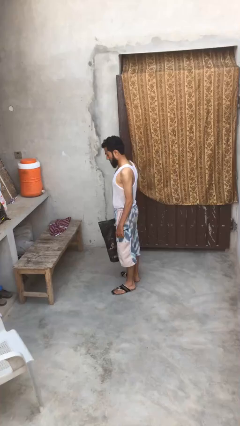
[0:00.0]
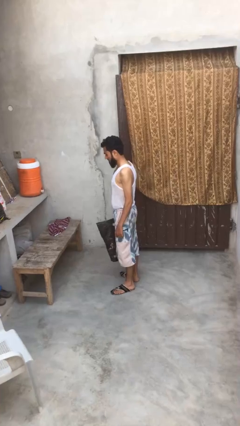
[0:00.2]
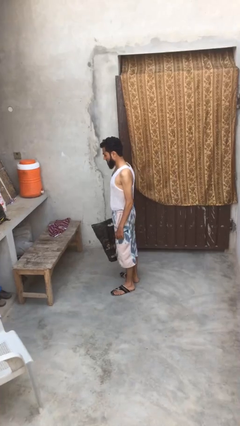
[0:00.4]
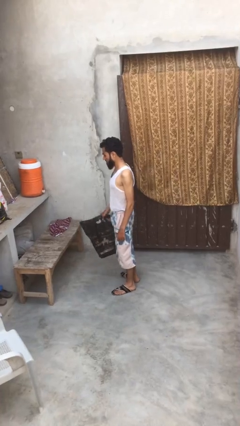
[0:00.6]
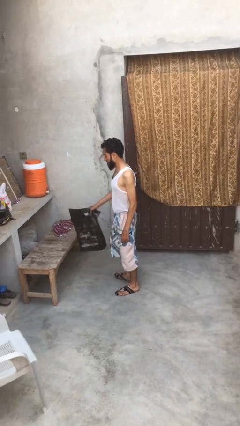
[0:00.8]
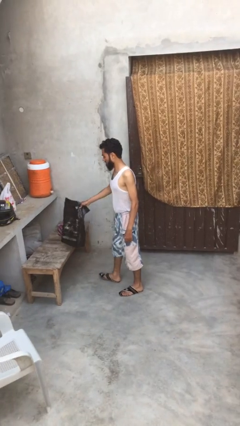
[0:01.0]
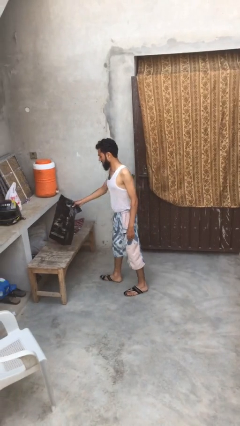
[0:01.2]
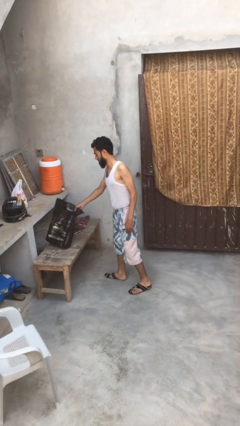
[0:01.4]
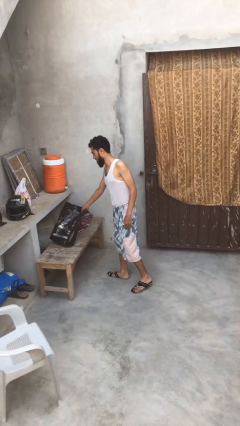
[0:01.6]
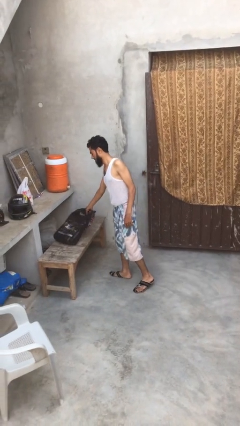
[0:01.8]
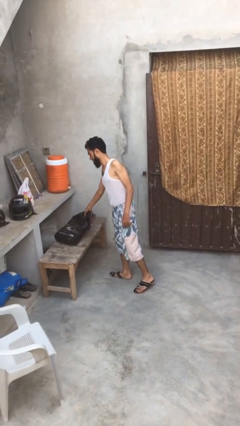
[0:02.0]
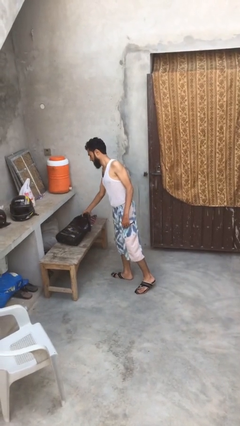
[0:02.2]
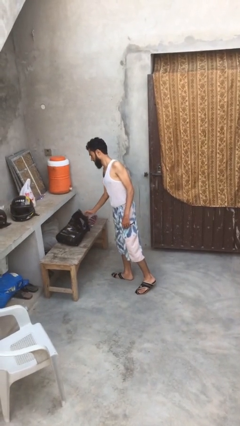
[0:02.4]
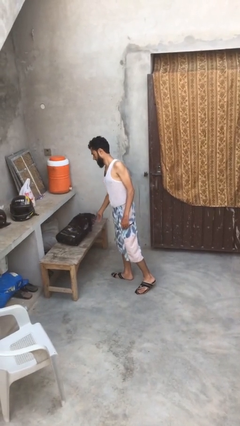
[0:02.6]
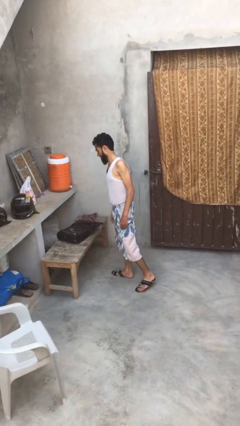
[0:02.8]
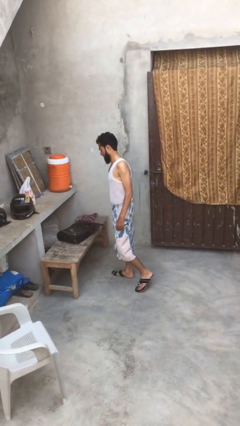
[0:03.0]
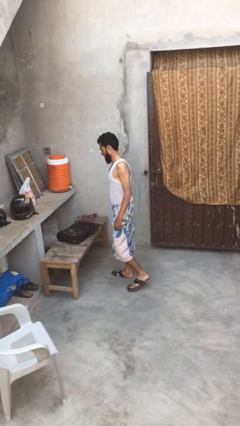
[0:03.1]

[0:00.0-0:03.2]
person puts down object on table

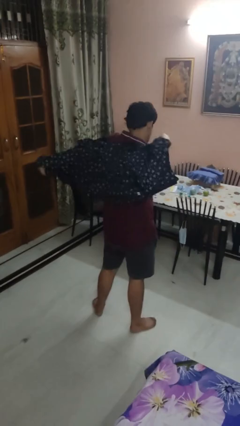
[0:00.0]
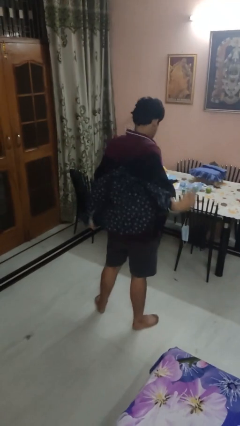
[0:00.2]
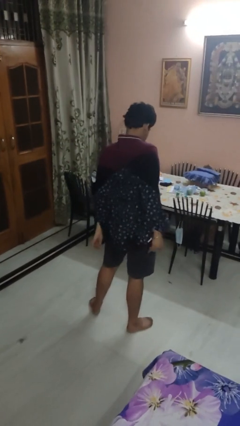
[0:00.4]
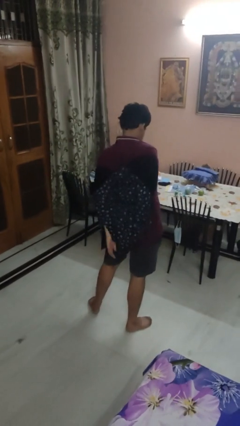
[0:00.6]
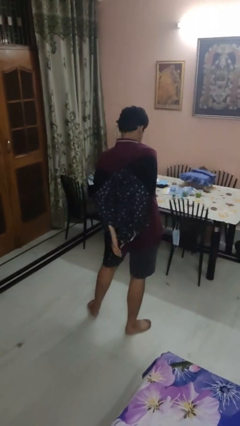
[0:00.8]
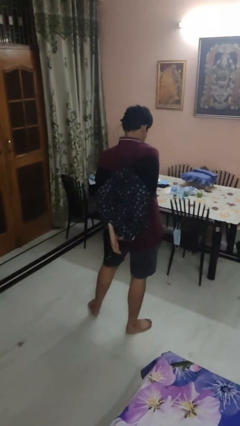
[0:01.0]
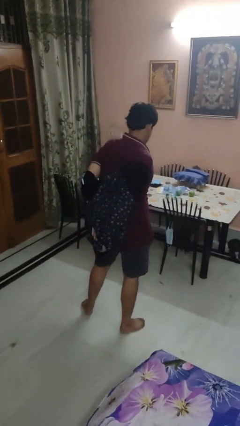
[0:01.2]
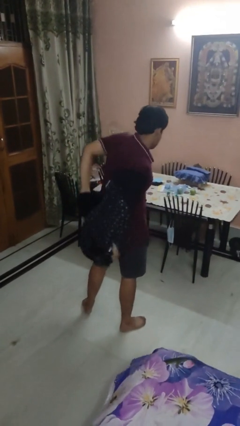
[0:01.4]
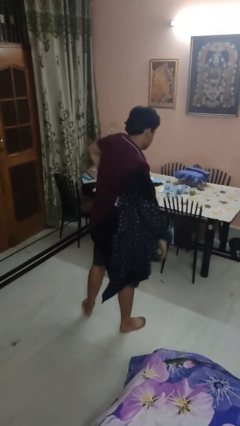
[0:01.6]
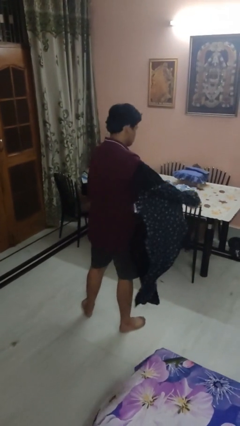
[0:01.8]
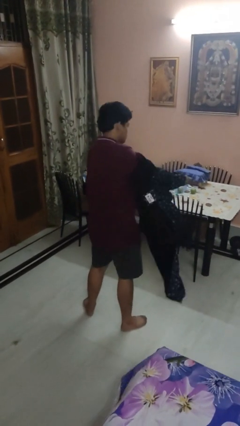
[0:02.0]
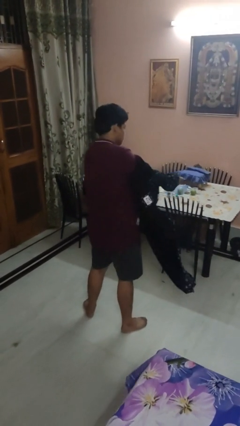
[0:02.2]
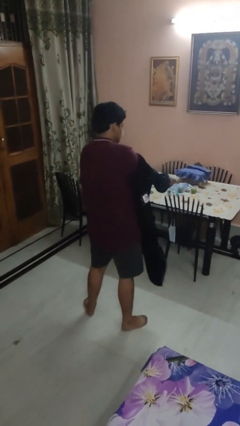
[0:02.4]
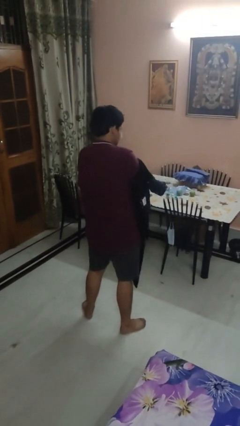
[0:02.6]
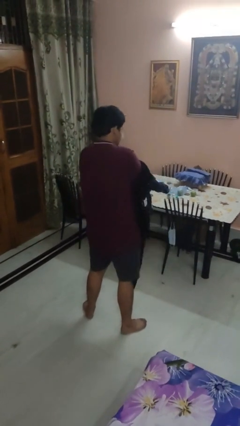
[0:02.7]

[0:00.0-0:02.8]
person takes off shirt

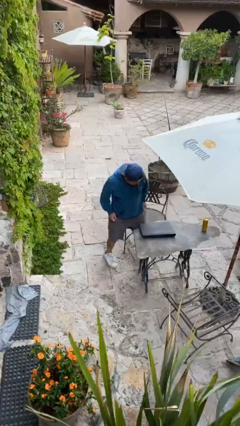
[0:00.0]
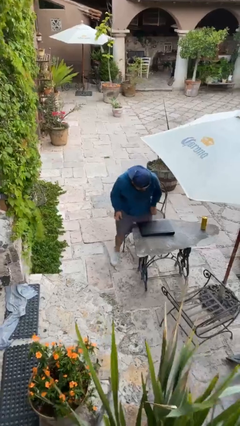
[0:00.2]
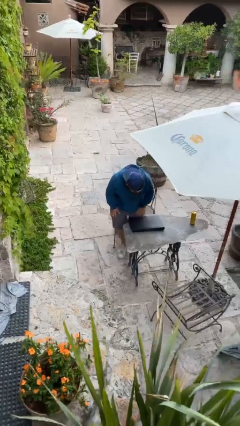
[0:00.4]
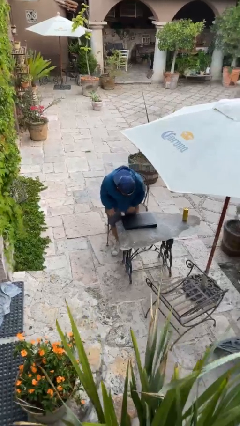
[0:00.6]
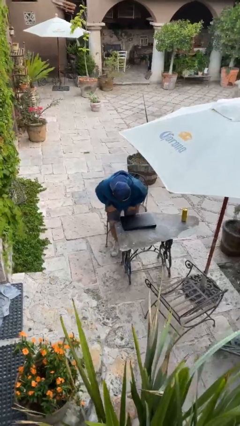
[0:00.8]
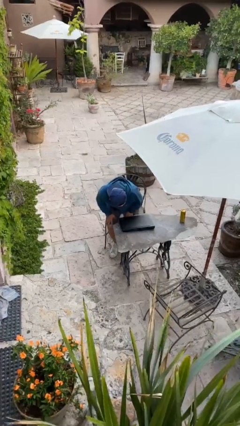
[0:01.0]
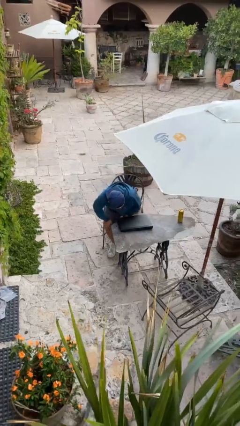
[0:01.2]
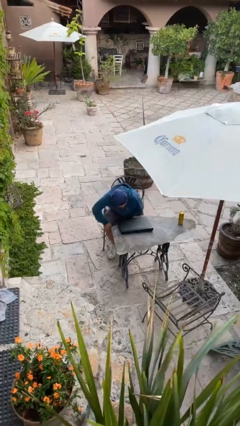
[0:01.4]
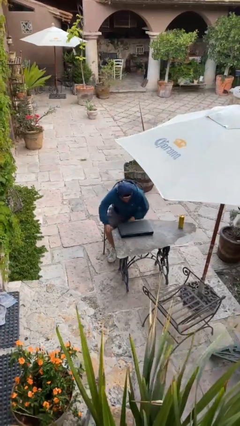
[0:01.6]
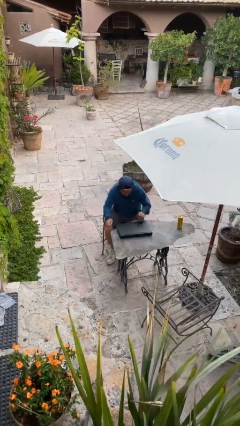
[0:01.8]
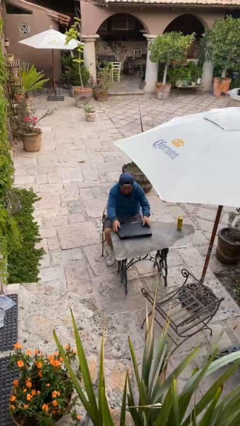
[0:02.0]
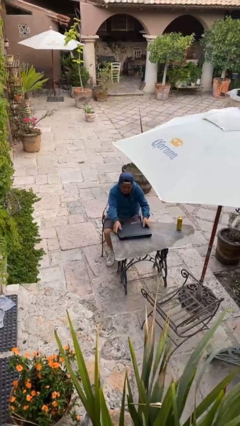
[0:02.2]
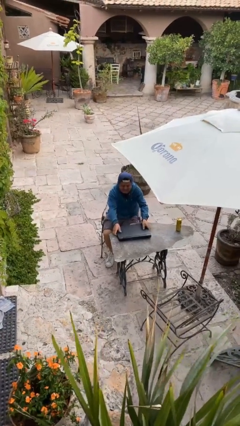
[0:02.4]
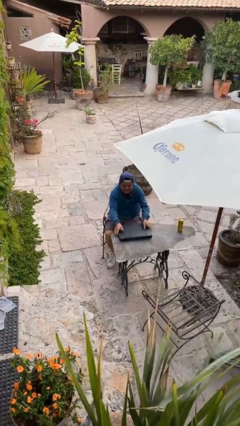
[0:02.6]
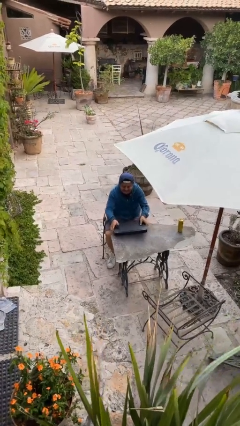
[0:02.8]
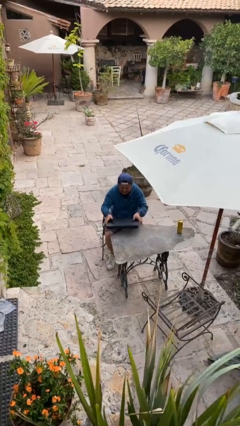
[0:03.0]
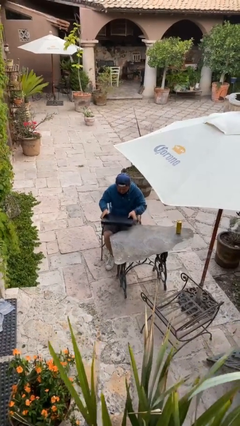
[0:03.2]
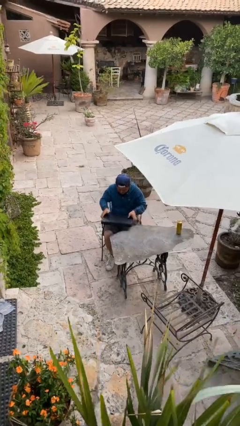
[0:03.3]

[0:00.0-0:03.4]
person sits down

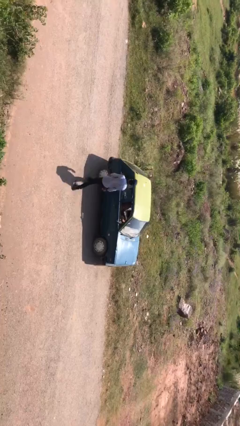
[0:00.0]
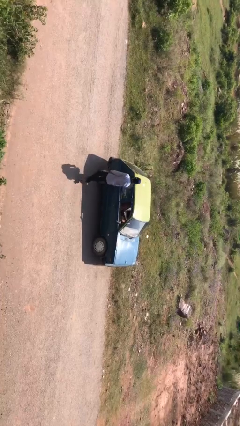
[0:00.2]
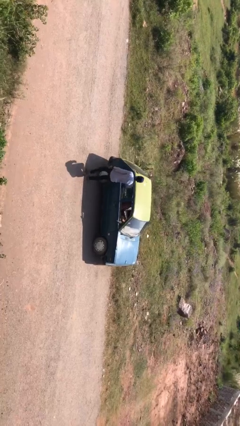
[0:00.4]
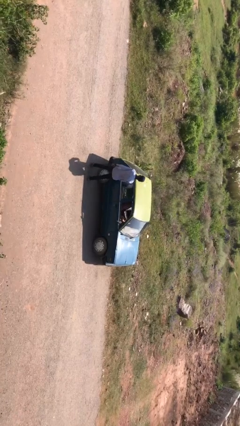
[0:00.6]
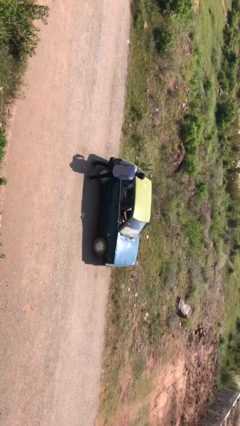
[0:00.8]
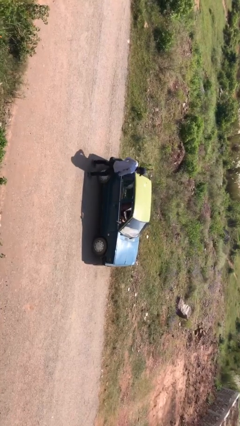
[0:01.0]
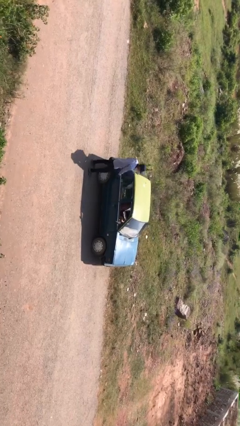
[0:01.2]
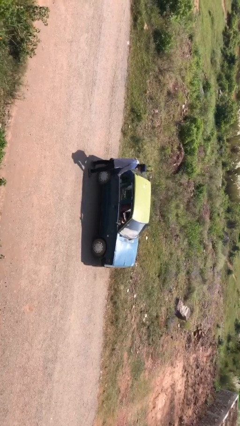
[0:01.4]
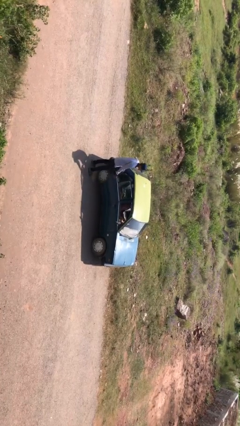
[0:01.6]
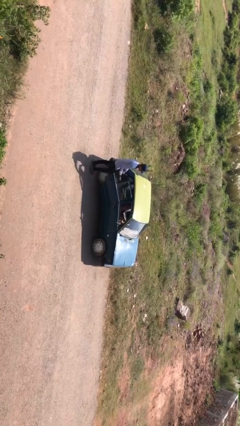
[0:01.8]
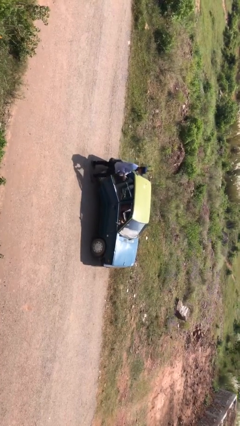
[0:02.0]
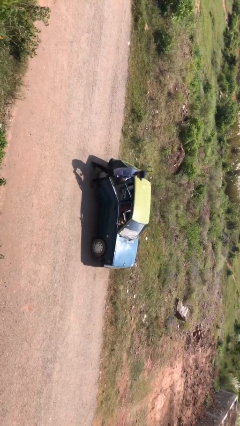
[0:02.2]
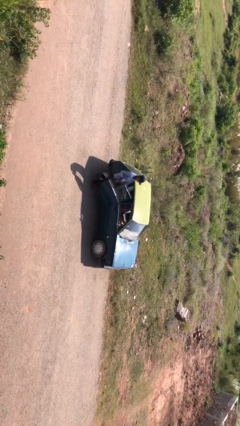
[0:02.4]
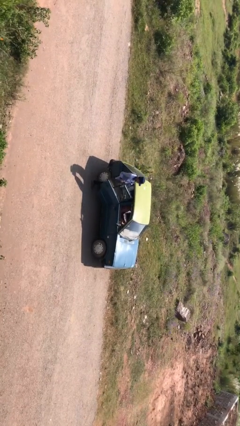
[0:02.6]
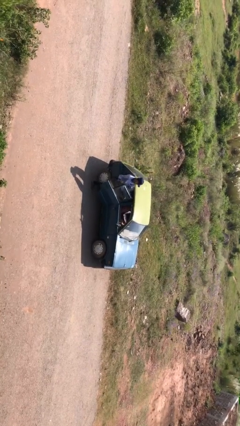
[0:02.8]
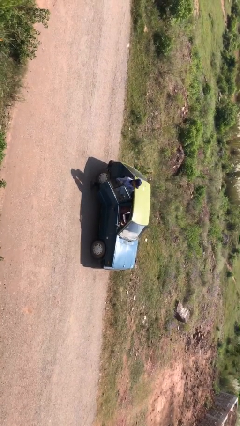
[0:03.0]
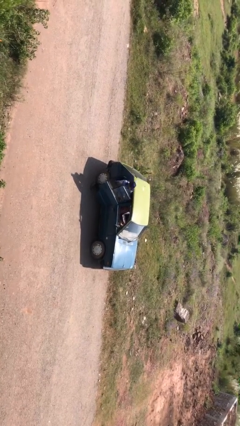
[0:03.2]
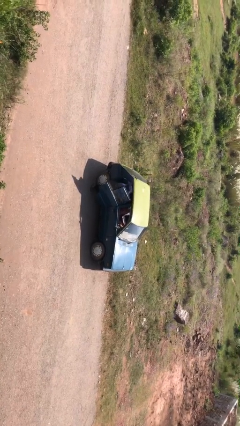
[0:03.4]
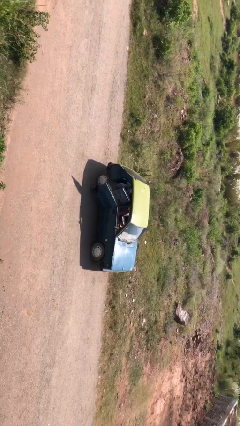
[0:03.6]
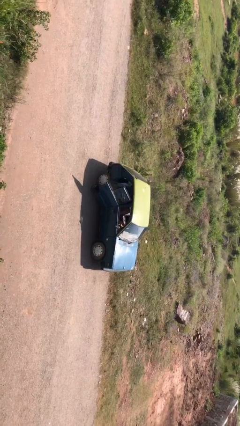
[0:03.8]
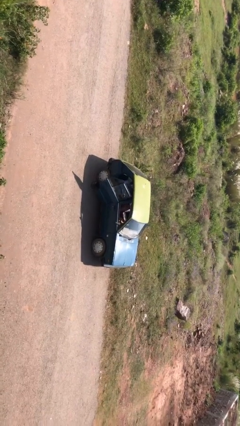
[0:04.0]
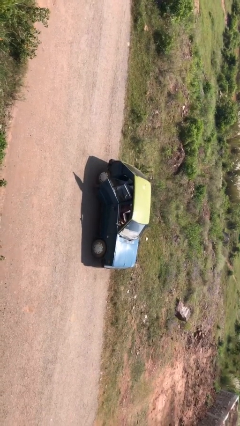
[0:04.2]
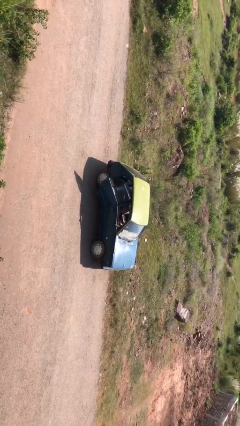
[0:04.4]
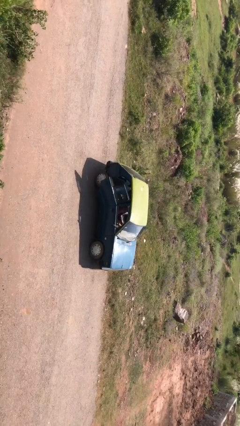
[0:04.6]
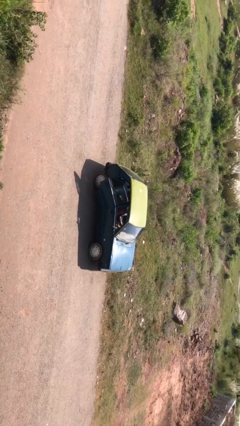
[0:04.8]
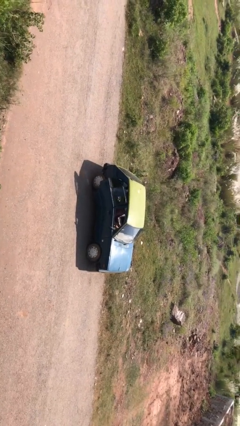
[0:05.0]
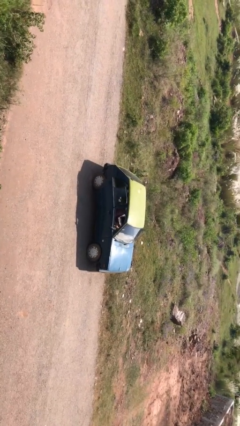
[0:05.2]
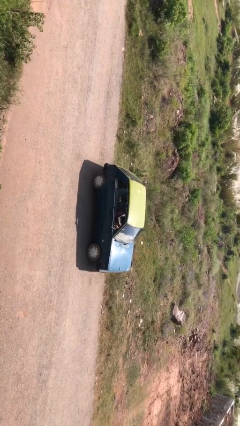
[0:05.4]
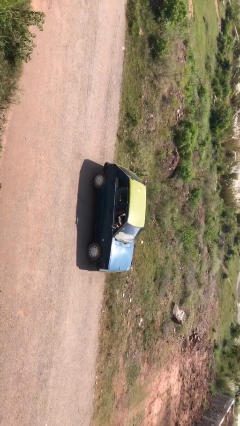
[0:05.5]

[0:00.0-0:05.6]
car picks up person

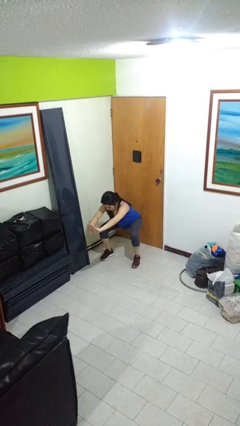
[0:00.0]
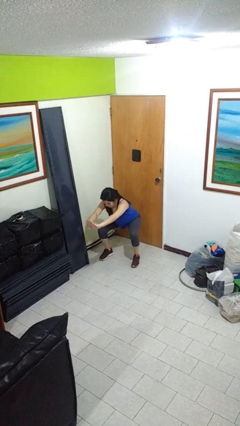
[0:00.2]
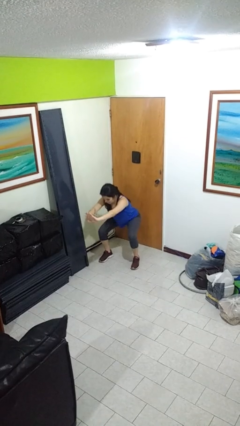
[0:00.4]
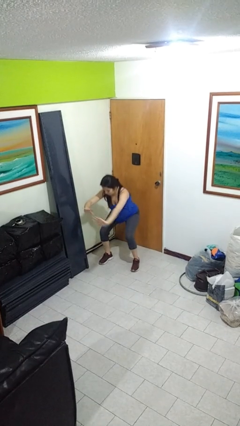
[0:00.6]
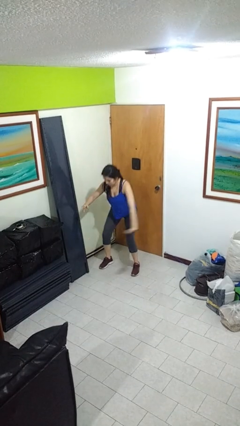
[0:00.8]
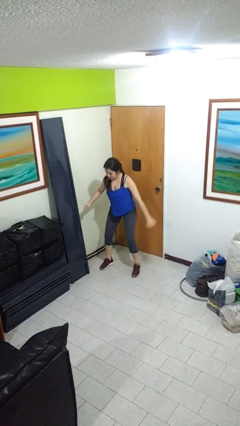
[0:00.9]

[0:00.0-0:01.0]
person stands up

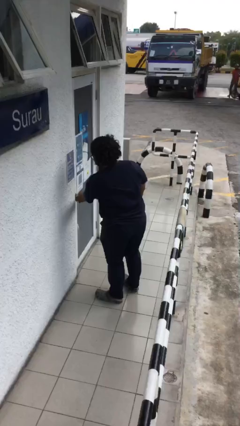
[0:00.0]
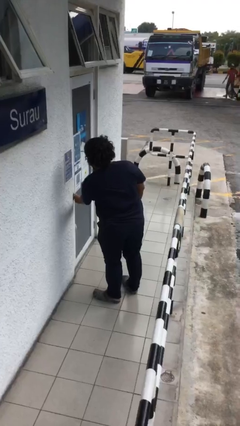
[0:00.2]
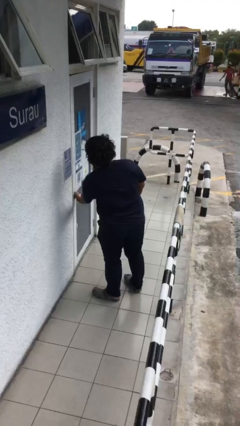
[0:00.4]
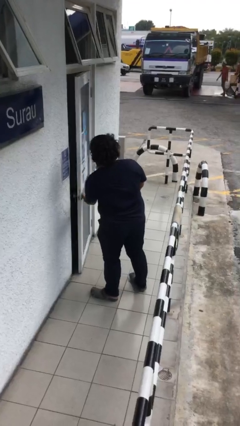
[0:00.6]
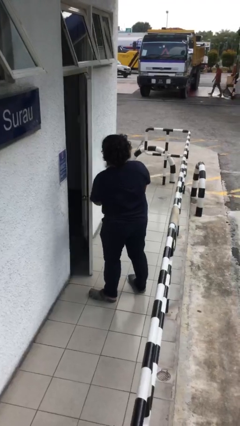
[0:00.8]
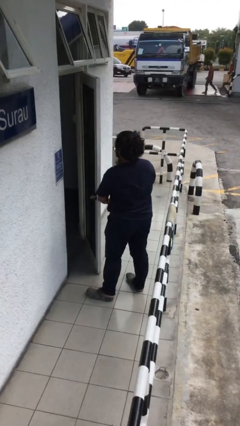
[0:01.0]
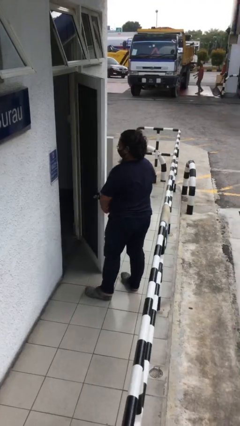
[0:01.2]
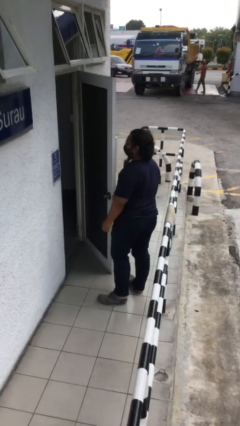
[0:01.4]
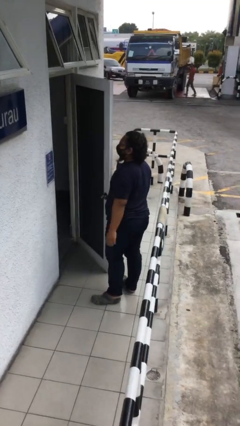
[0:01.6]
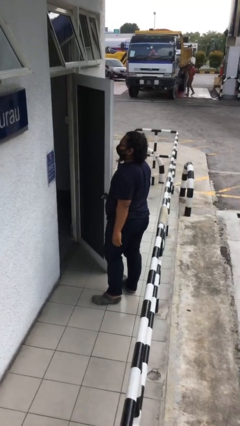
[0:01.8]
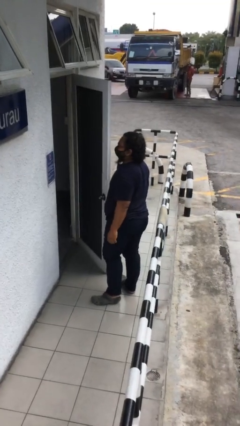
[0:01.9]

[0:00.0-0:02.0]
person opens facility door
